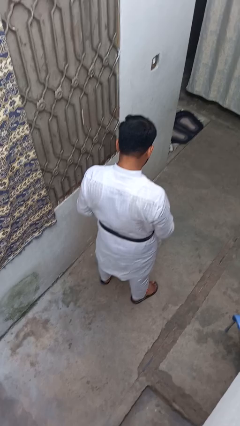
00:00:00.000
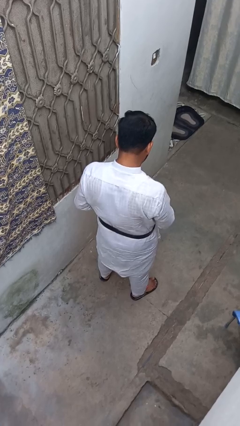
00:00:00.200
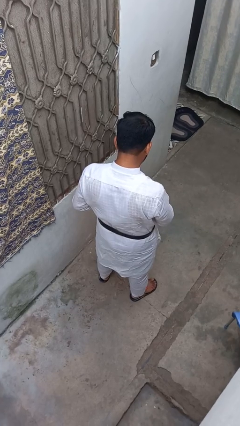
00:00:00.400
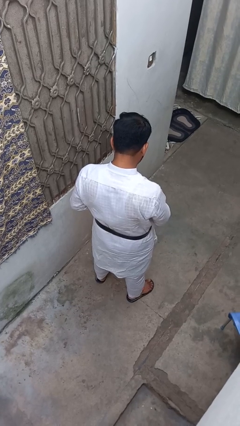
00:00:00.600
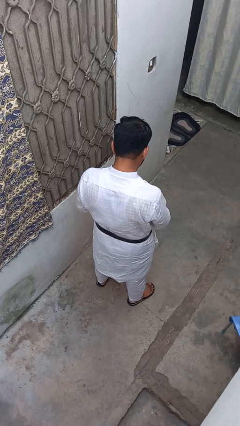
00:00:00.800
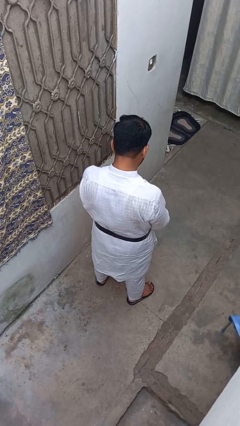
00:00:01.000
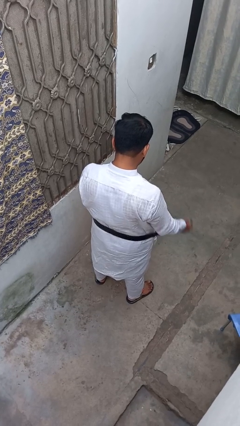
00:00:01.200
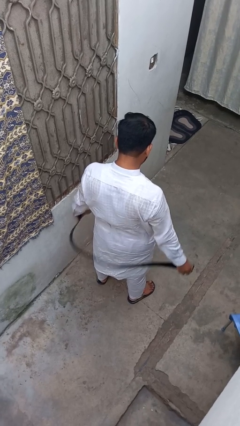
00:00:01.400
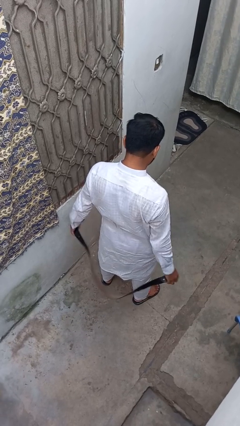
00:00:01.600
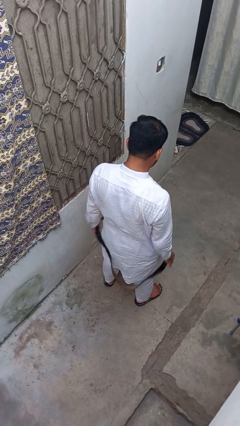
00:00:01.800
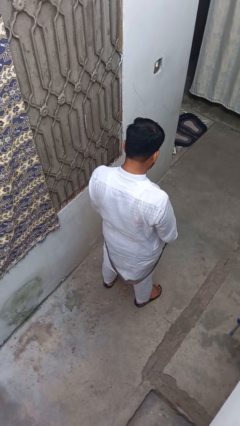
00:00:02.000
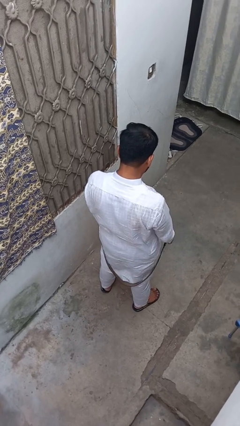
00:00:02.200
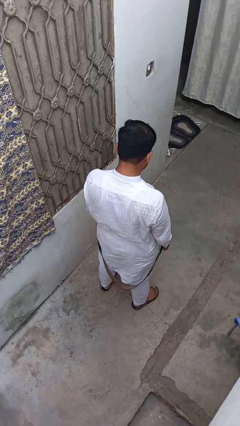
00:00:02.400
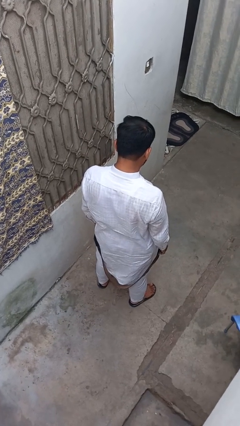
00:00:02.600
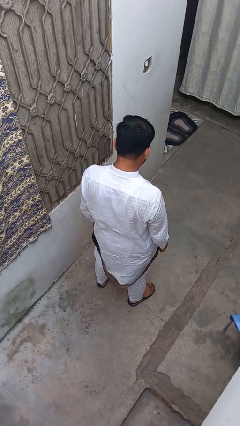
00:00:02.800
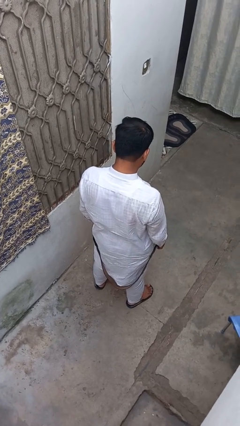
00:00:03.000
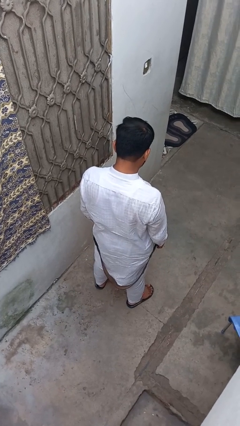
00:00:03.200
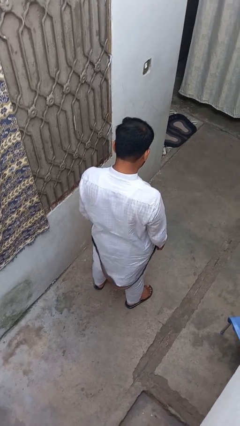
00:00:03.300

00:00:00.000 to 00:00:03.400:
person takes off belt

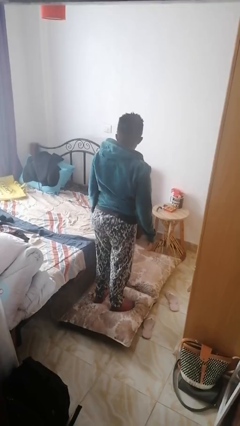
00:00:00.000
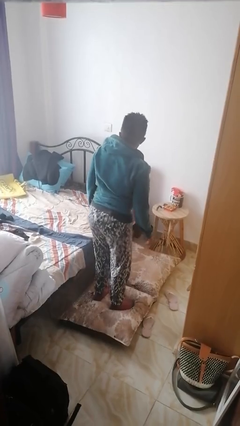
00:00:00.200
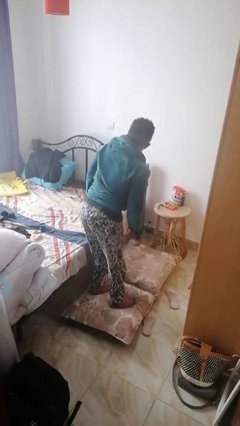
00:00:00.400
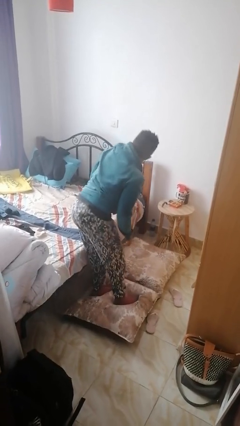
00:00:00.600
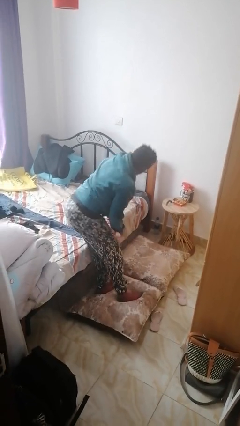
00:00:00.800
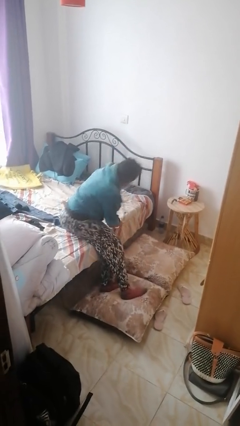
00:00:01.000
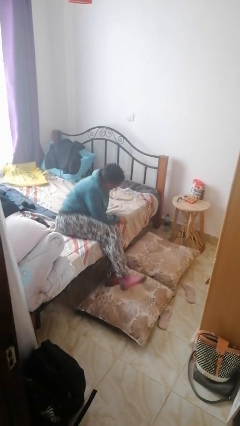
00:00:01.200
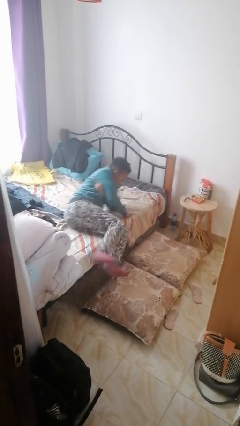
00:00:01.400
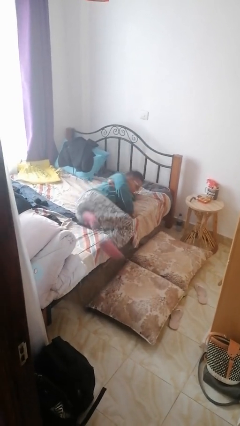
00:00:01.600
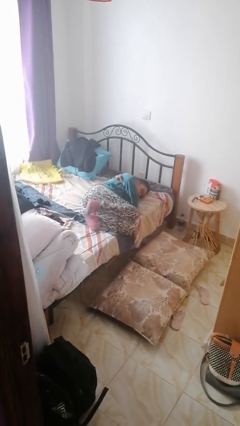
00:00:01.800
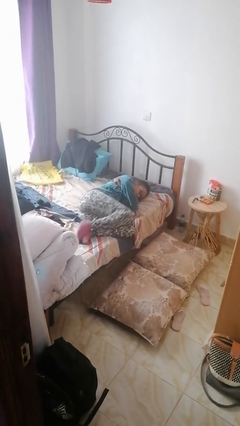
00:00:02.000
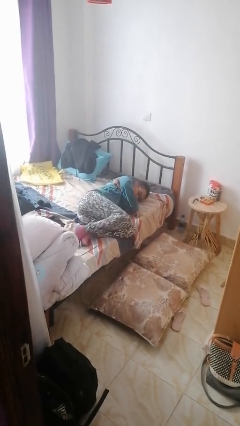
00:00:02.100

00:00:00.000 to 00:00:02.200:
person lies down on bed

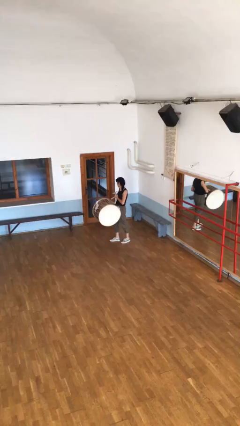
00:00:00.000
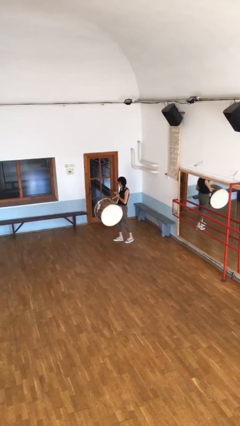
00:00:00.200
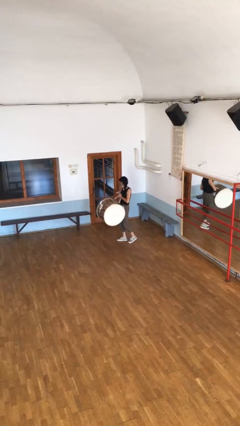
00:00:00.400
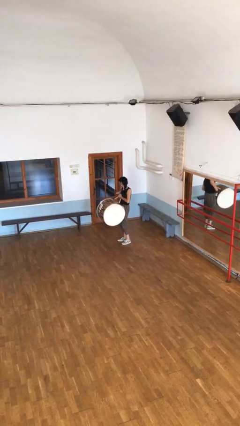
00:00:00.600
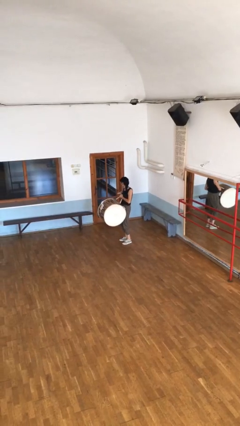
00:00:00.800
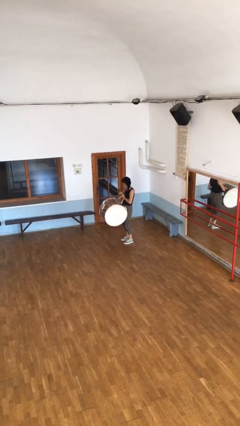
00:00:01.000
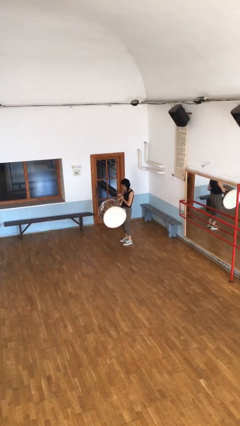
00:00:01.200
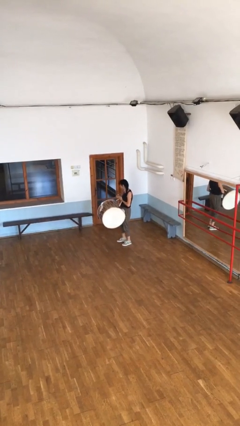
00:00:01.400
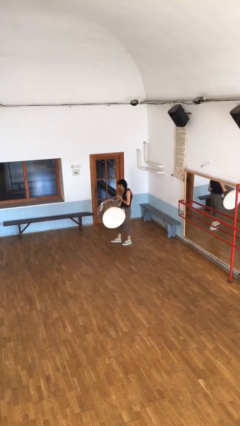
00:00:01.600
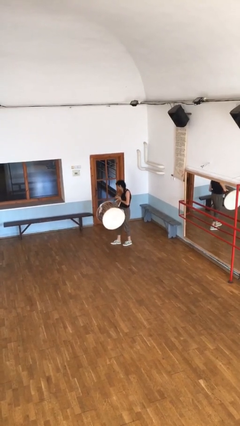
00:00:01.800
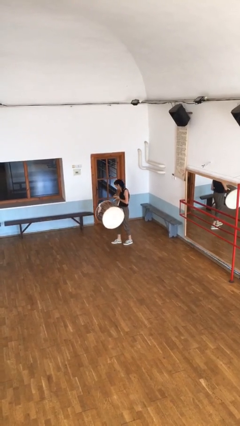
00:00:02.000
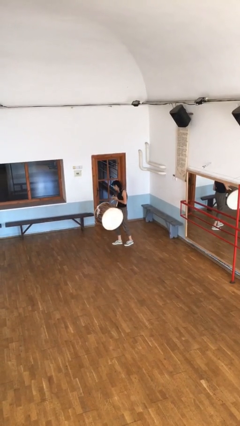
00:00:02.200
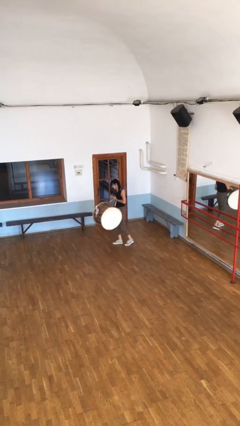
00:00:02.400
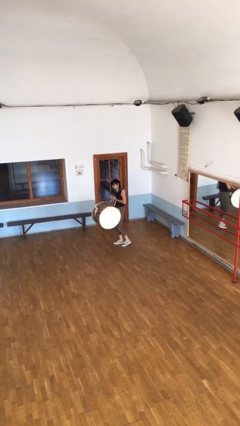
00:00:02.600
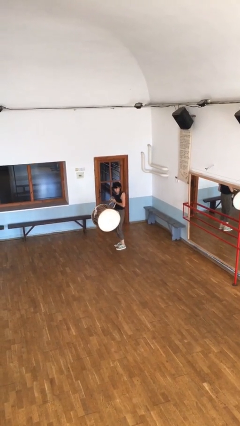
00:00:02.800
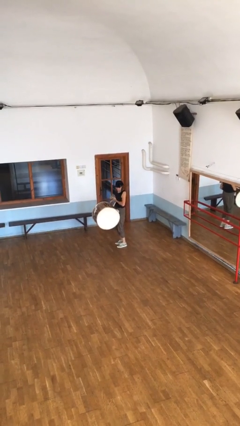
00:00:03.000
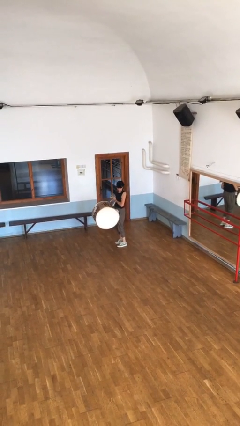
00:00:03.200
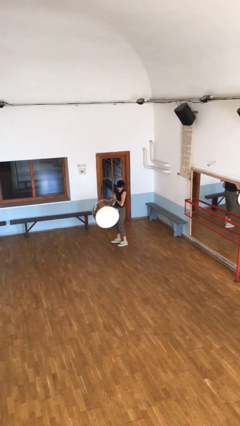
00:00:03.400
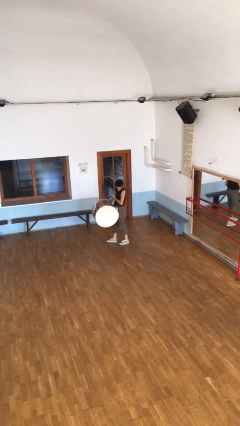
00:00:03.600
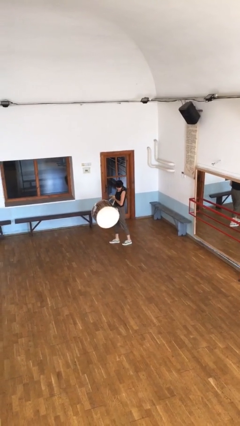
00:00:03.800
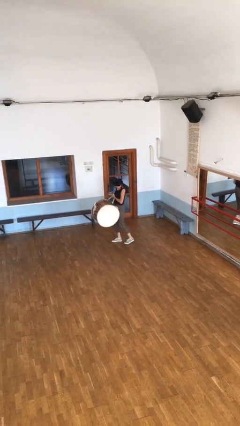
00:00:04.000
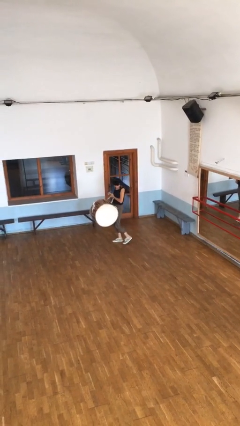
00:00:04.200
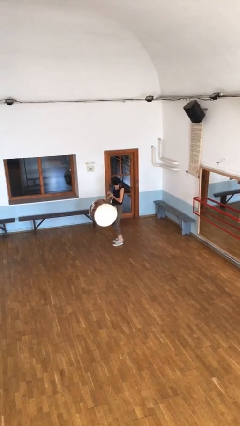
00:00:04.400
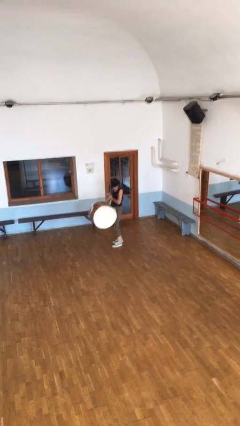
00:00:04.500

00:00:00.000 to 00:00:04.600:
person carries heavy object

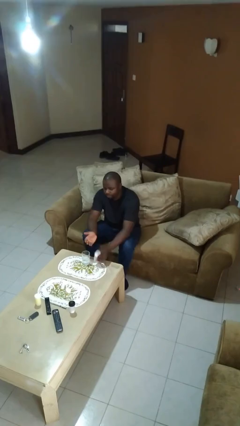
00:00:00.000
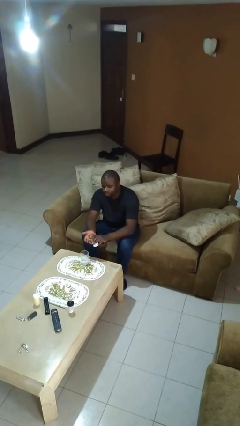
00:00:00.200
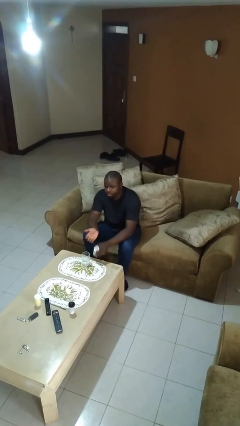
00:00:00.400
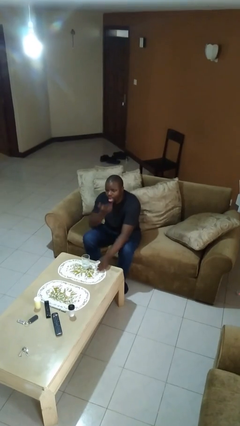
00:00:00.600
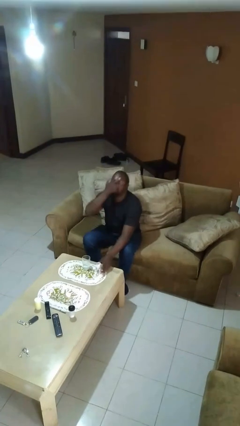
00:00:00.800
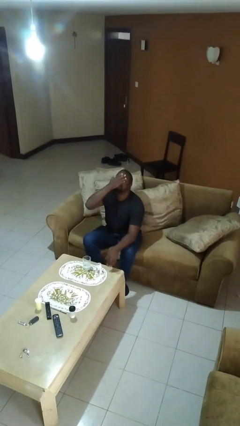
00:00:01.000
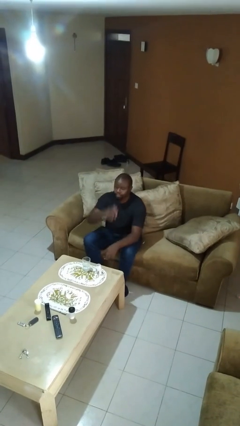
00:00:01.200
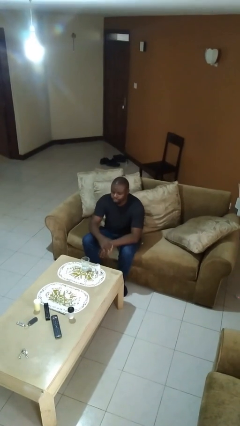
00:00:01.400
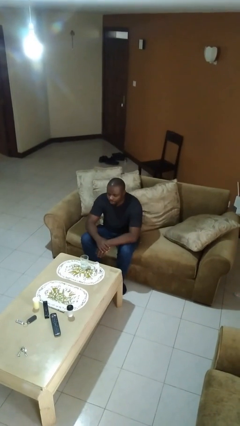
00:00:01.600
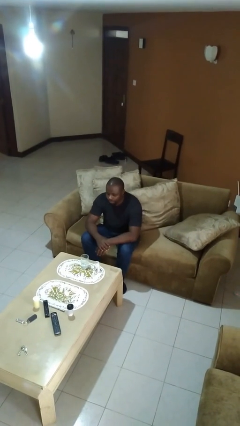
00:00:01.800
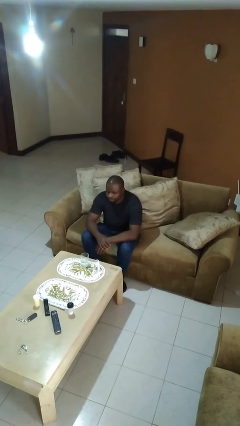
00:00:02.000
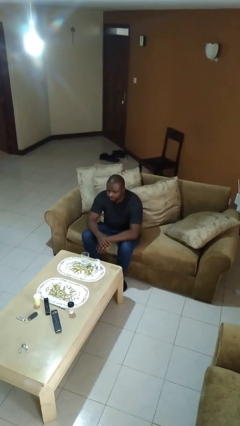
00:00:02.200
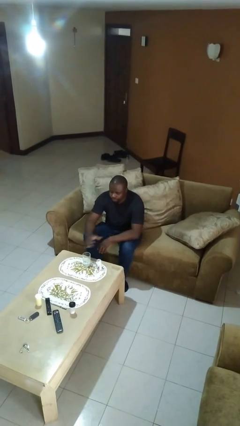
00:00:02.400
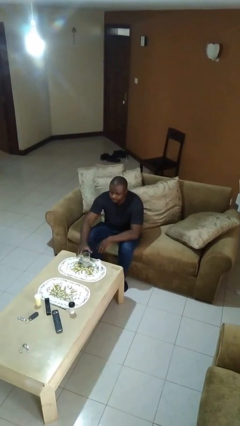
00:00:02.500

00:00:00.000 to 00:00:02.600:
person takes medicine pills

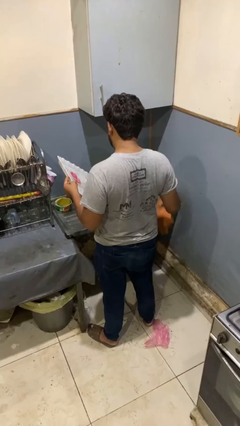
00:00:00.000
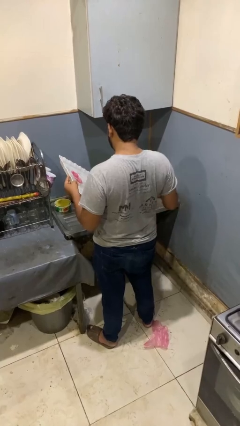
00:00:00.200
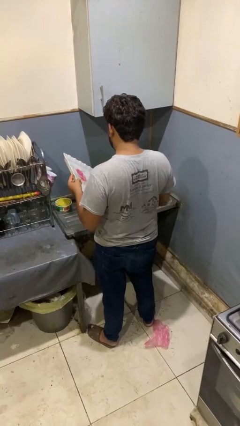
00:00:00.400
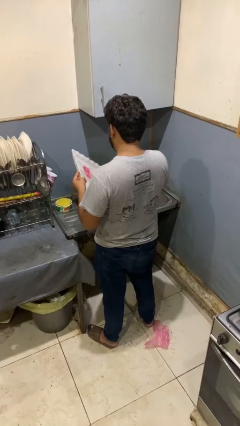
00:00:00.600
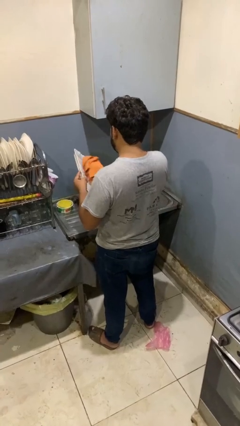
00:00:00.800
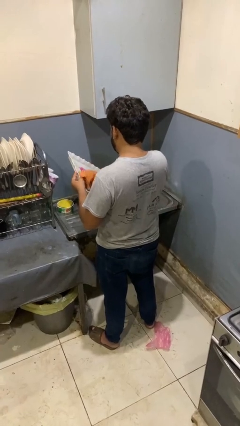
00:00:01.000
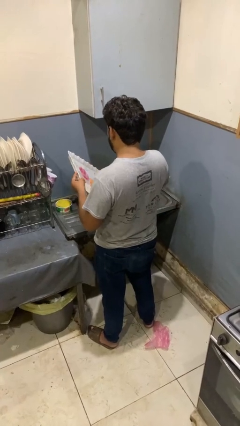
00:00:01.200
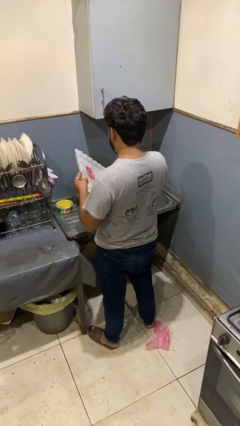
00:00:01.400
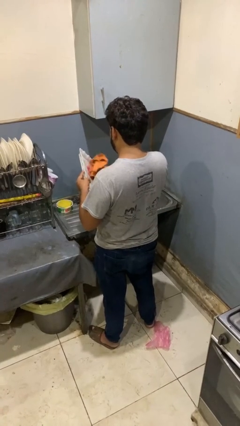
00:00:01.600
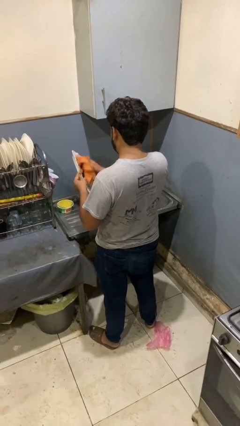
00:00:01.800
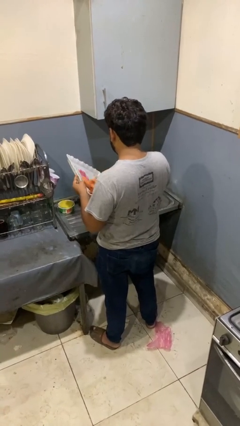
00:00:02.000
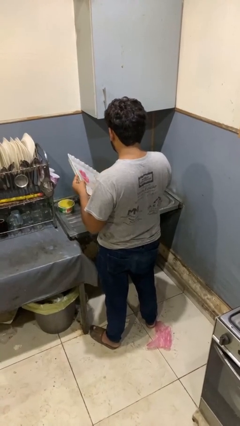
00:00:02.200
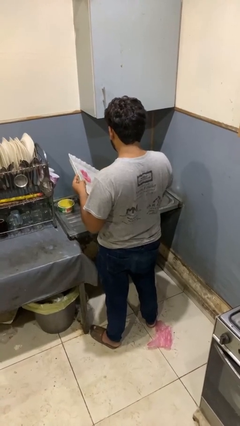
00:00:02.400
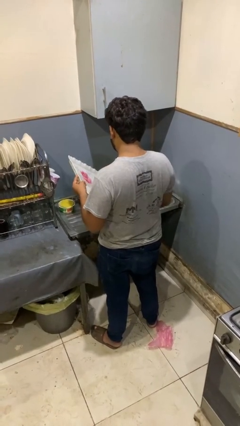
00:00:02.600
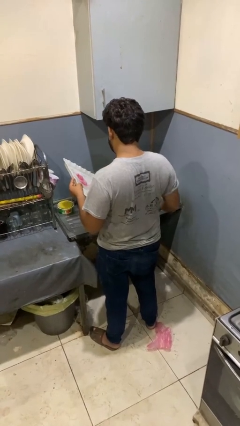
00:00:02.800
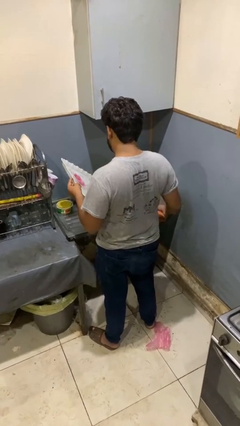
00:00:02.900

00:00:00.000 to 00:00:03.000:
person dries dish

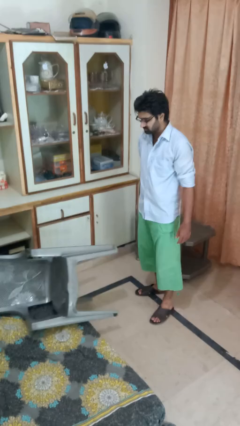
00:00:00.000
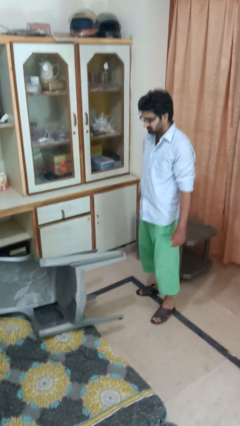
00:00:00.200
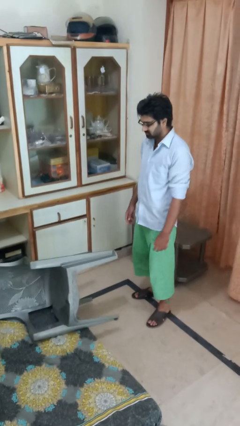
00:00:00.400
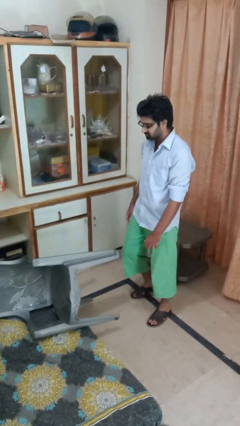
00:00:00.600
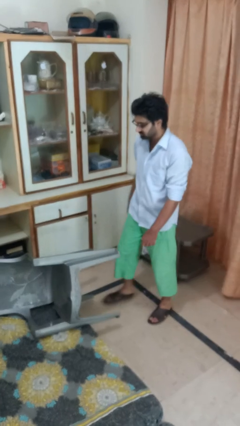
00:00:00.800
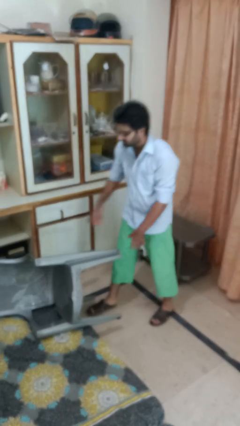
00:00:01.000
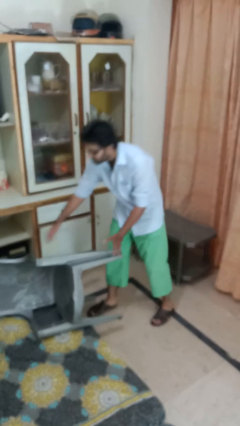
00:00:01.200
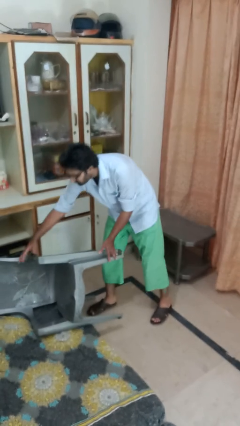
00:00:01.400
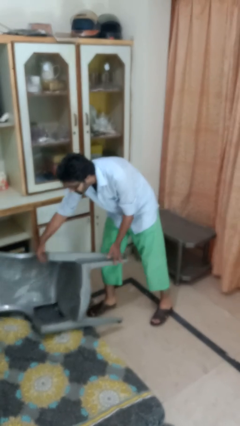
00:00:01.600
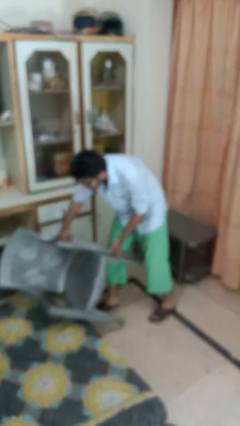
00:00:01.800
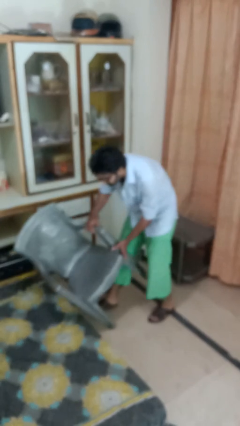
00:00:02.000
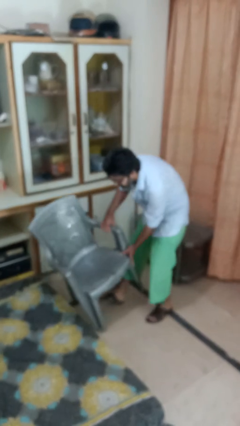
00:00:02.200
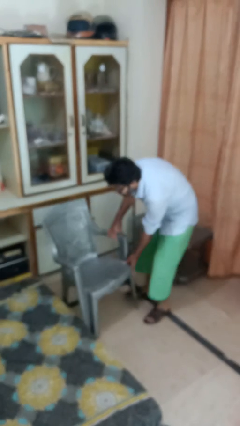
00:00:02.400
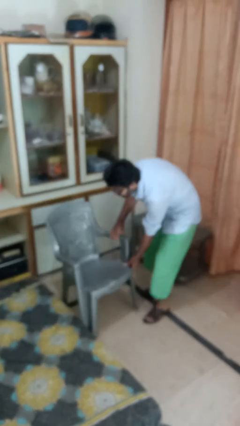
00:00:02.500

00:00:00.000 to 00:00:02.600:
person sets upright furniture
